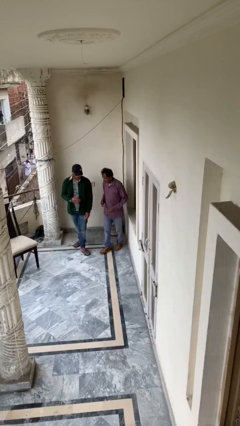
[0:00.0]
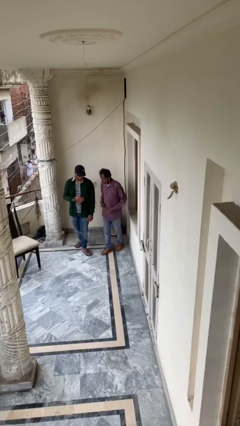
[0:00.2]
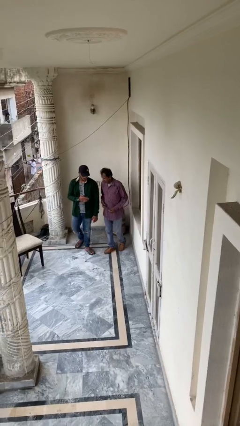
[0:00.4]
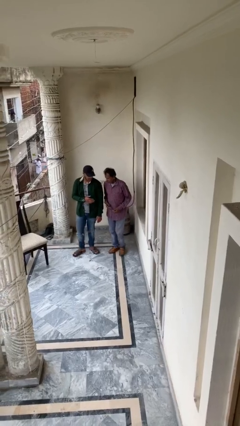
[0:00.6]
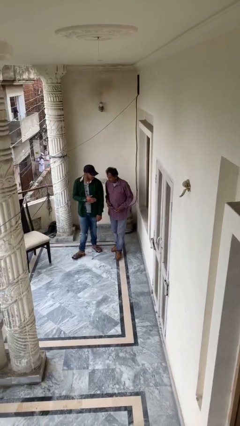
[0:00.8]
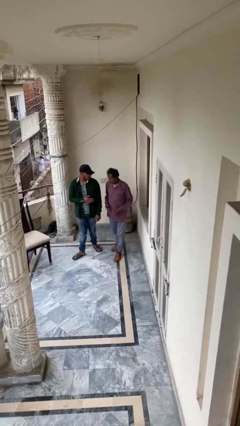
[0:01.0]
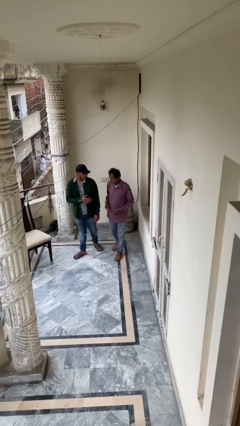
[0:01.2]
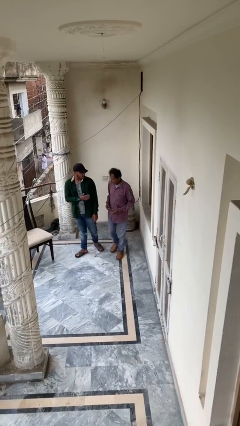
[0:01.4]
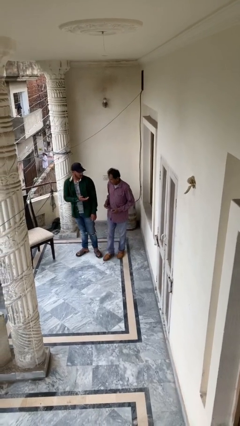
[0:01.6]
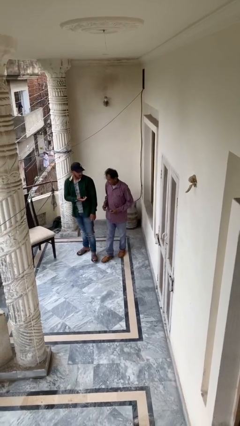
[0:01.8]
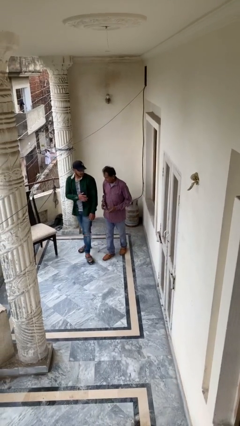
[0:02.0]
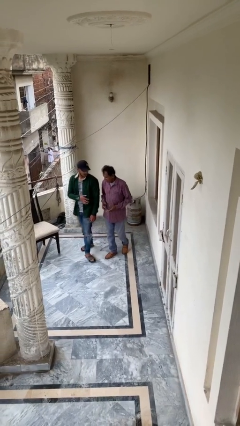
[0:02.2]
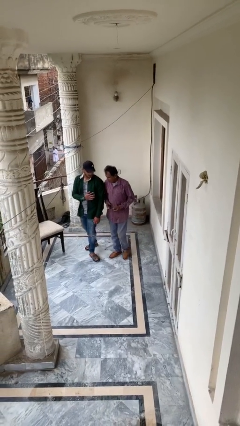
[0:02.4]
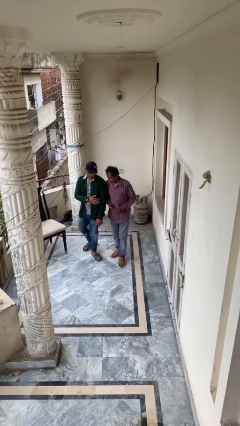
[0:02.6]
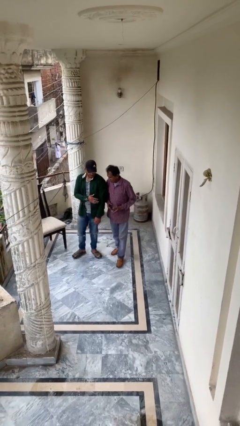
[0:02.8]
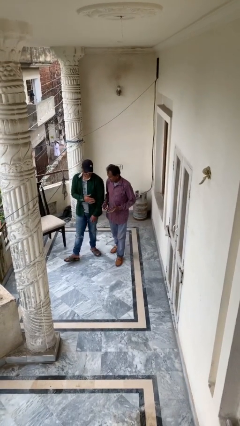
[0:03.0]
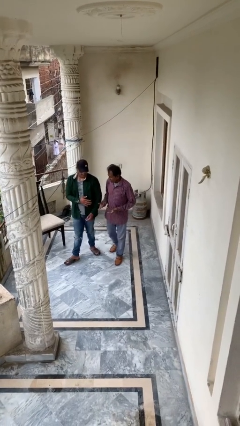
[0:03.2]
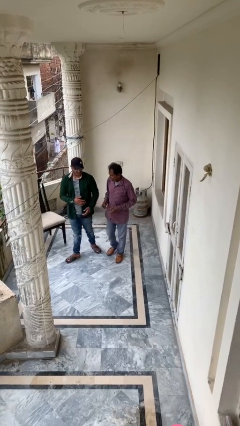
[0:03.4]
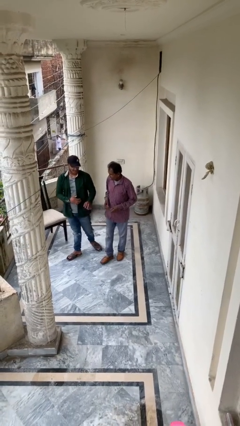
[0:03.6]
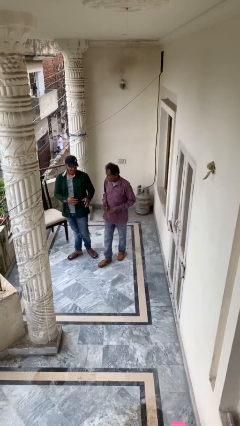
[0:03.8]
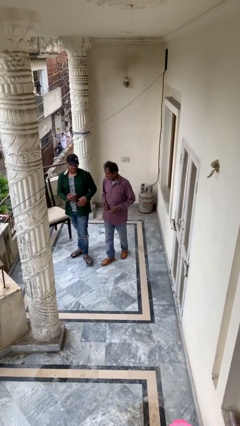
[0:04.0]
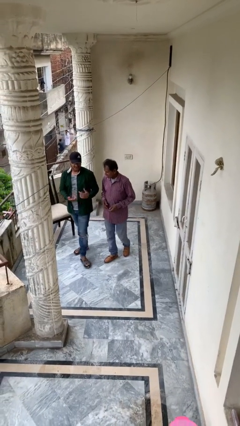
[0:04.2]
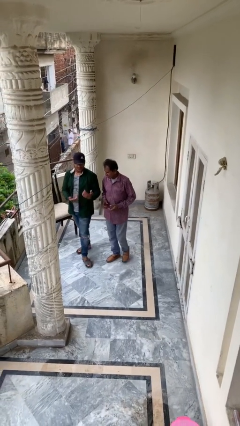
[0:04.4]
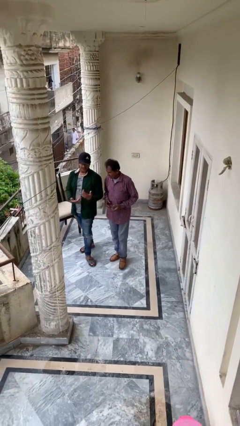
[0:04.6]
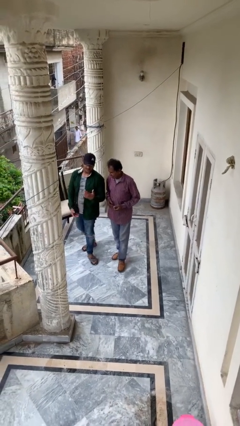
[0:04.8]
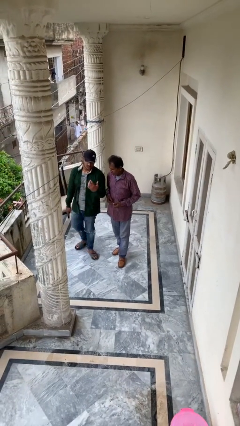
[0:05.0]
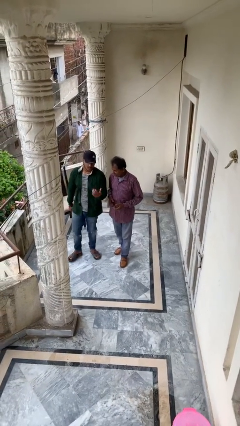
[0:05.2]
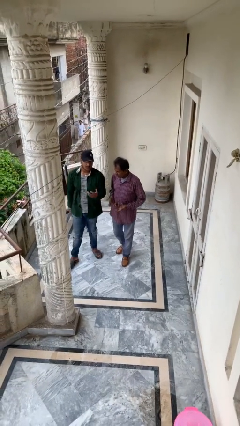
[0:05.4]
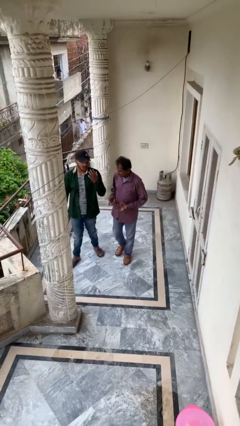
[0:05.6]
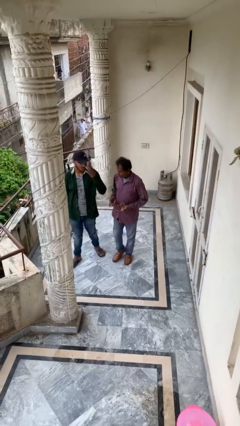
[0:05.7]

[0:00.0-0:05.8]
person talks to person

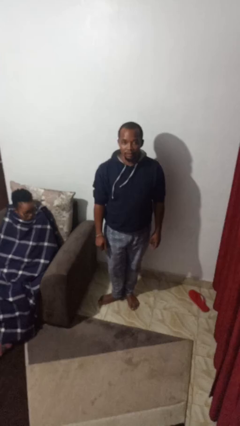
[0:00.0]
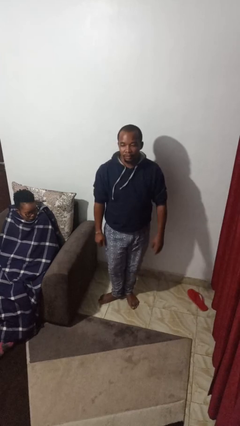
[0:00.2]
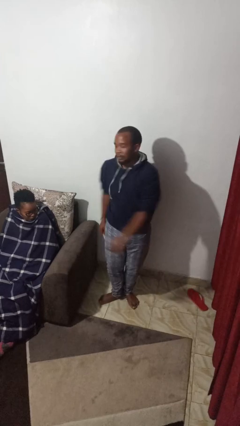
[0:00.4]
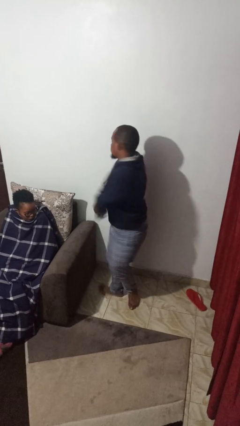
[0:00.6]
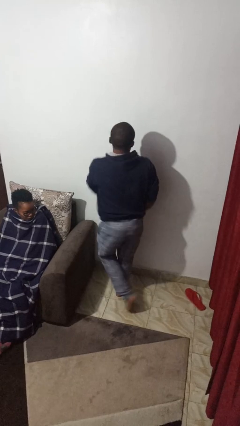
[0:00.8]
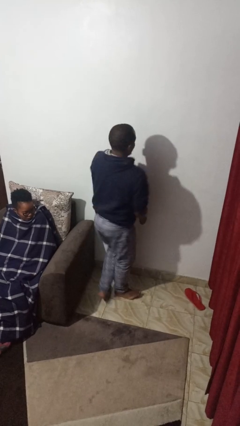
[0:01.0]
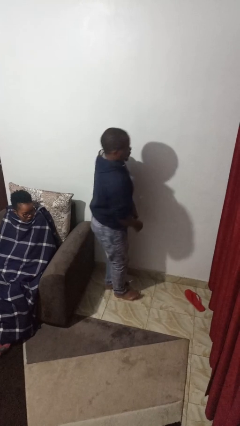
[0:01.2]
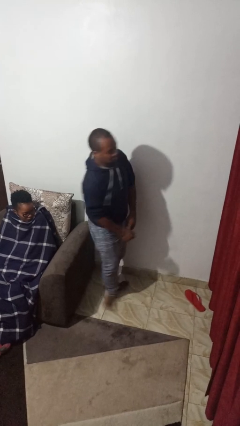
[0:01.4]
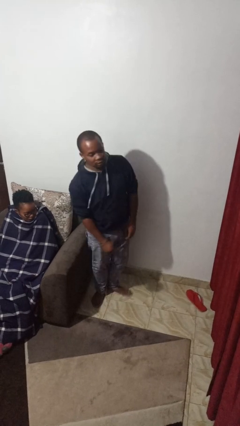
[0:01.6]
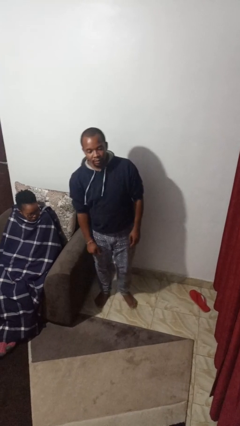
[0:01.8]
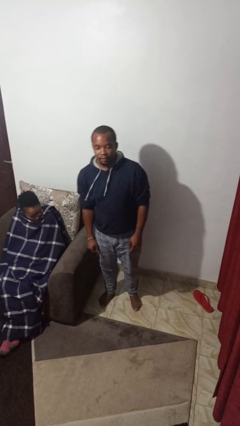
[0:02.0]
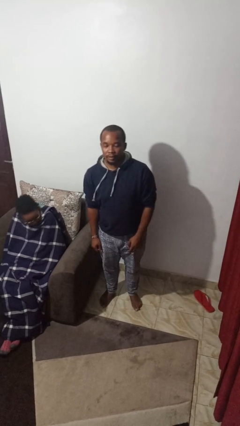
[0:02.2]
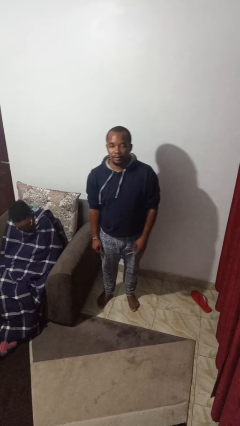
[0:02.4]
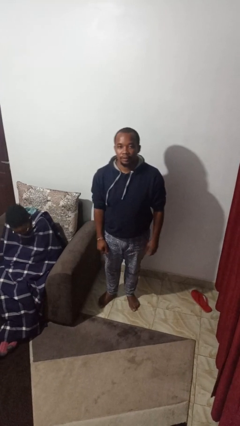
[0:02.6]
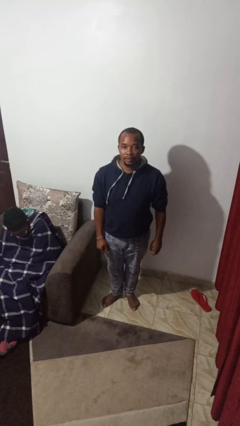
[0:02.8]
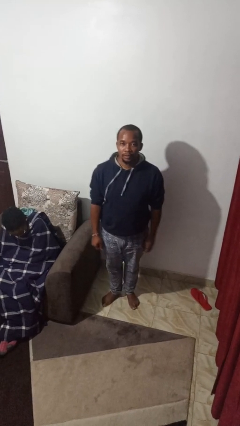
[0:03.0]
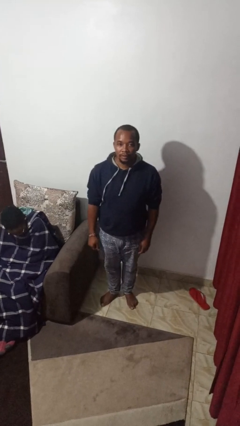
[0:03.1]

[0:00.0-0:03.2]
person twirls

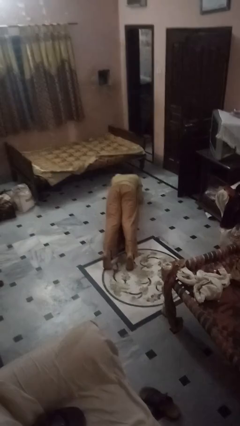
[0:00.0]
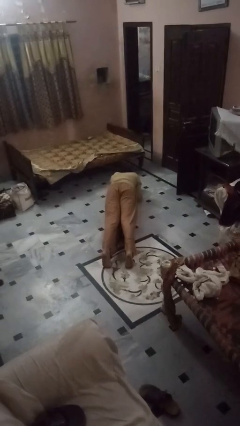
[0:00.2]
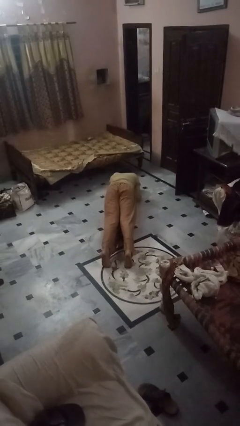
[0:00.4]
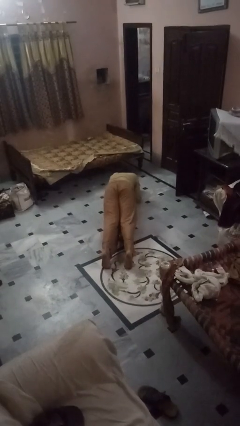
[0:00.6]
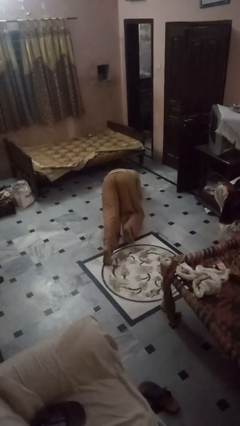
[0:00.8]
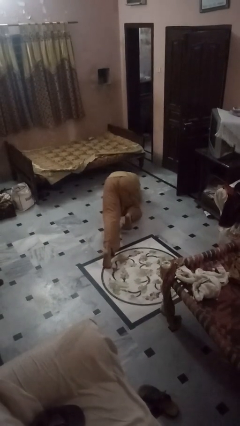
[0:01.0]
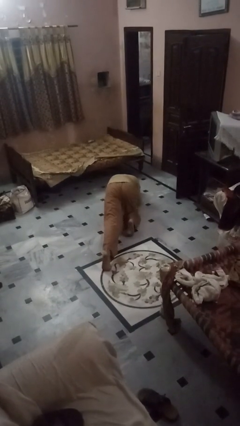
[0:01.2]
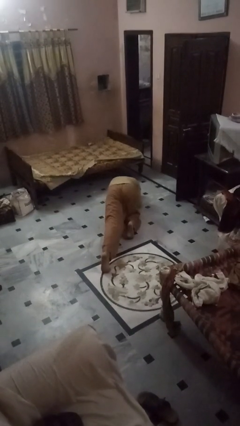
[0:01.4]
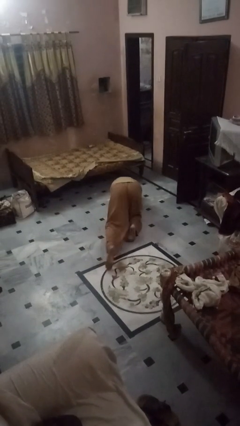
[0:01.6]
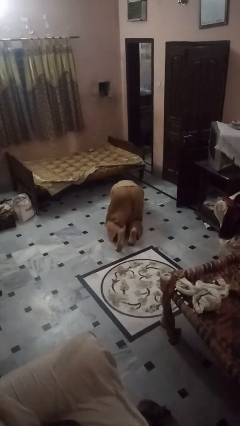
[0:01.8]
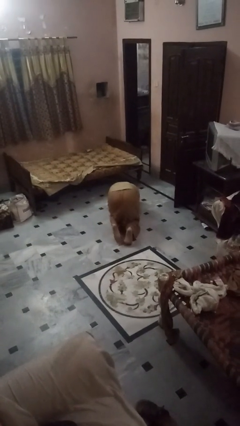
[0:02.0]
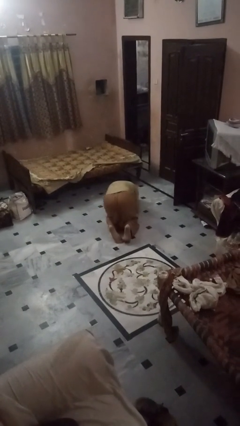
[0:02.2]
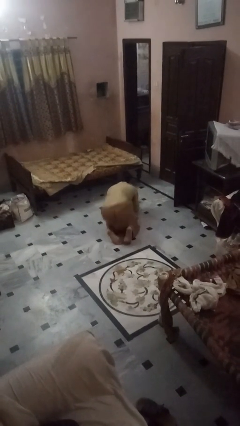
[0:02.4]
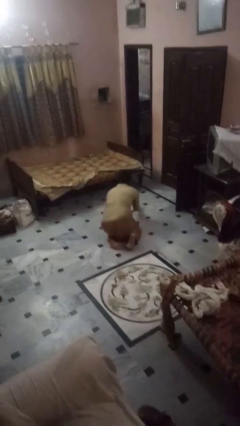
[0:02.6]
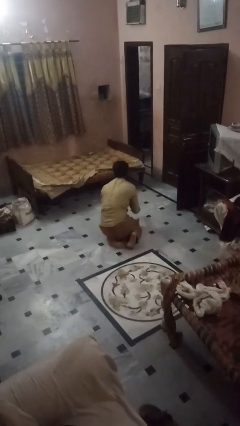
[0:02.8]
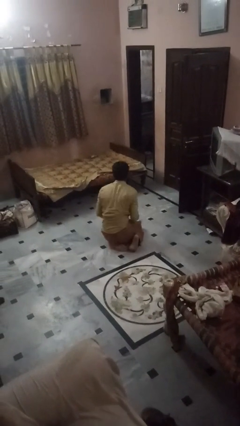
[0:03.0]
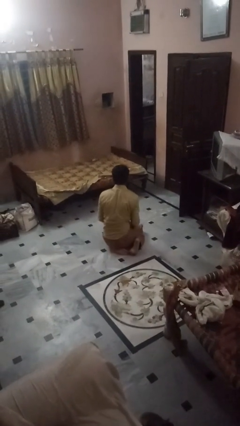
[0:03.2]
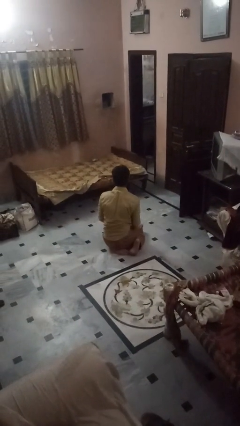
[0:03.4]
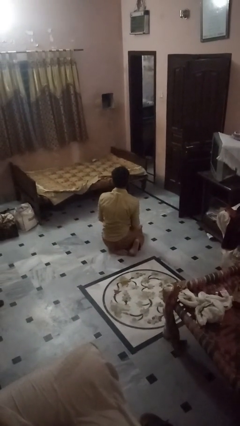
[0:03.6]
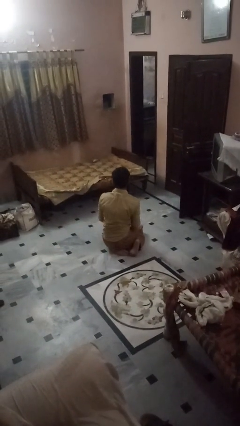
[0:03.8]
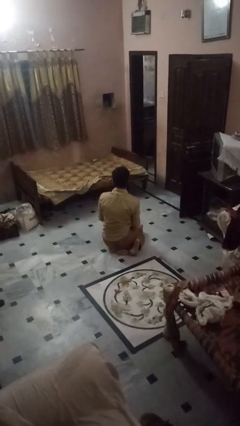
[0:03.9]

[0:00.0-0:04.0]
person stands up from floor

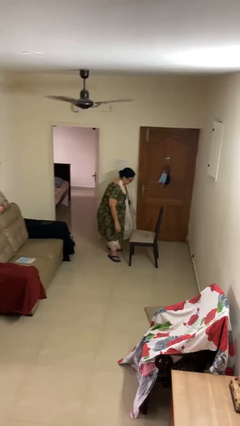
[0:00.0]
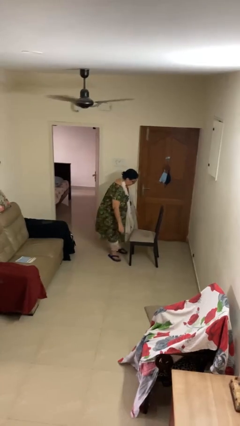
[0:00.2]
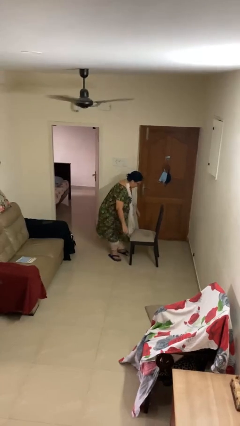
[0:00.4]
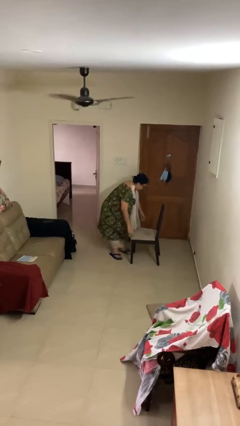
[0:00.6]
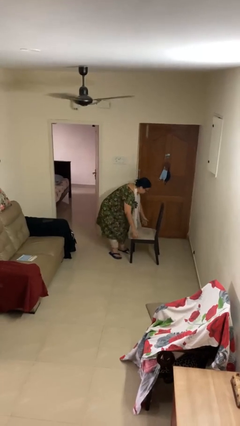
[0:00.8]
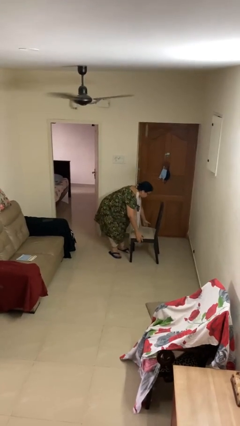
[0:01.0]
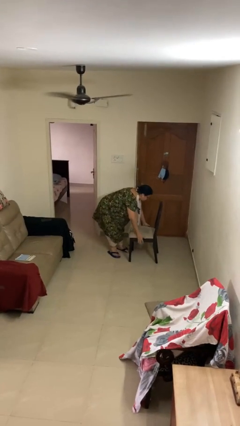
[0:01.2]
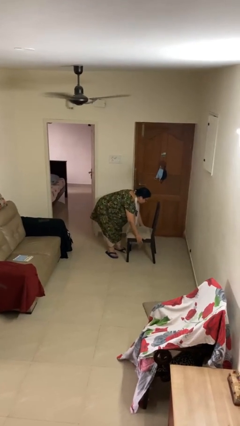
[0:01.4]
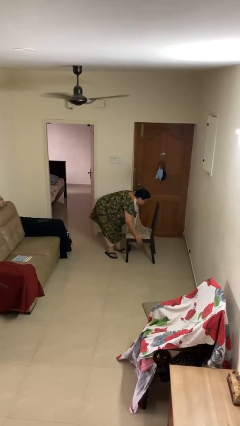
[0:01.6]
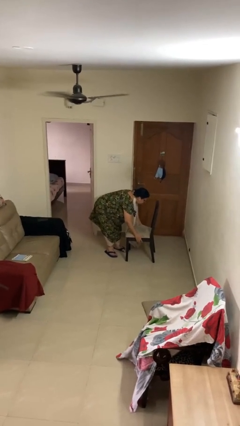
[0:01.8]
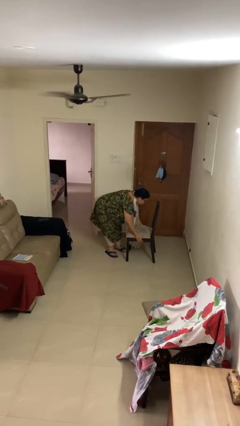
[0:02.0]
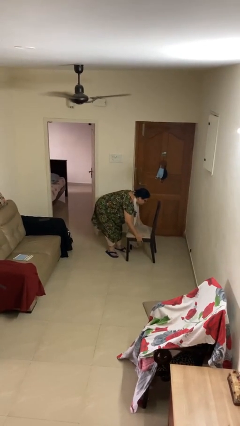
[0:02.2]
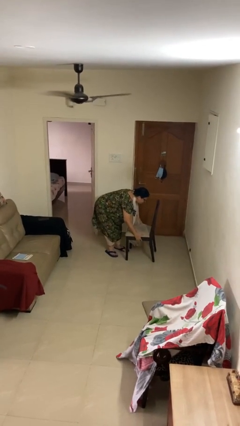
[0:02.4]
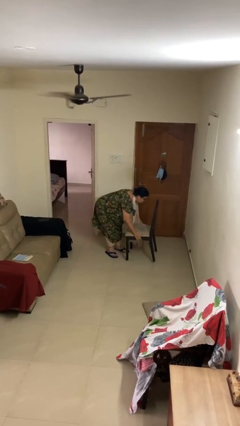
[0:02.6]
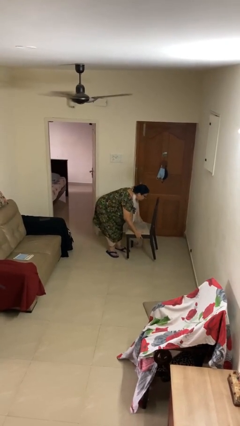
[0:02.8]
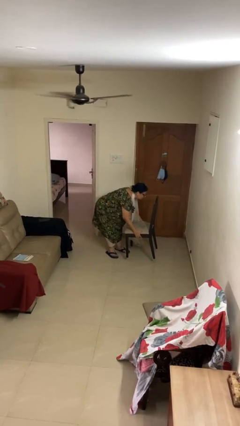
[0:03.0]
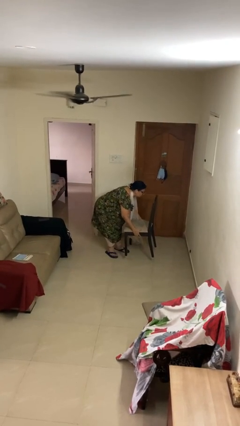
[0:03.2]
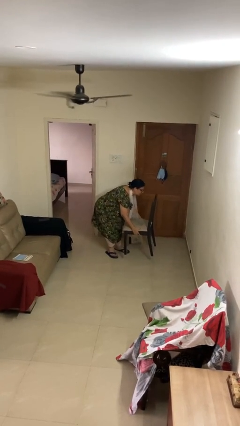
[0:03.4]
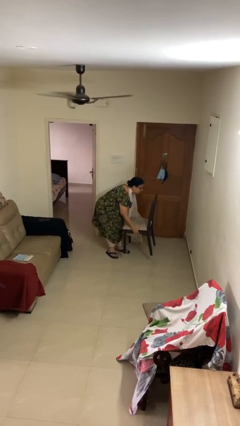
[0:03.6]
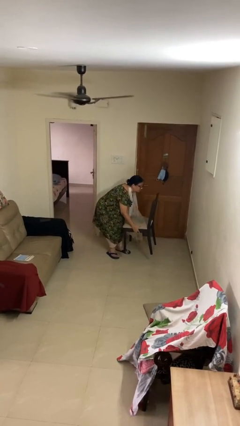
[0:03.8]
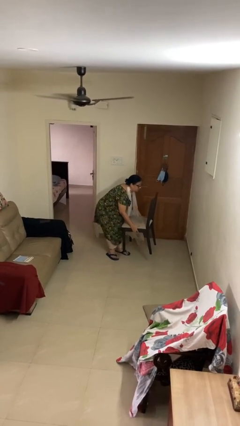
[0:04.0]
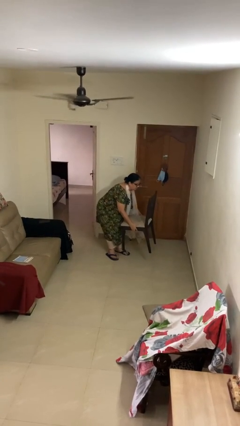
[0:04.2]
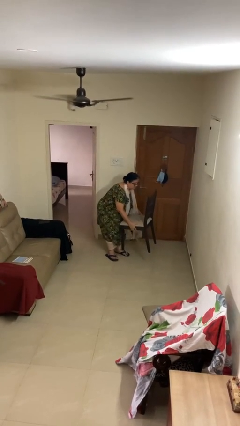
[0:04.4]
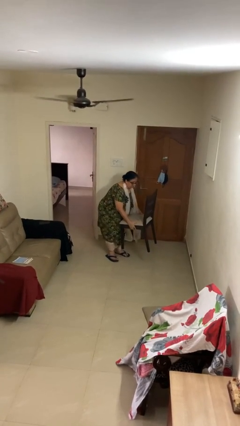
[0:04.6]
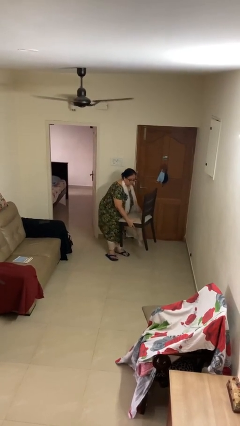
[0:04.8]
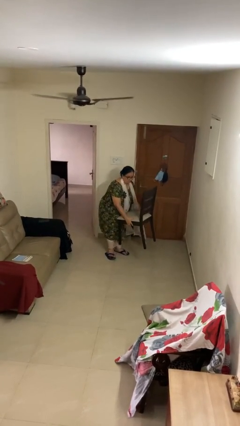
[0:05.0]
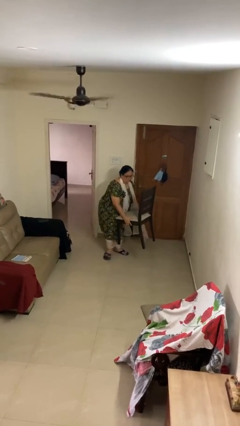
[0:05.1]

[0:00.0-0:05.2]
person picks up object from floor
